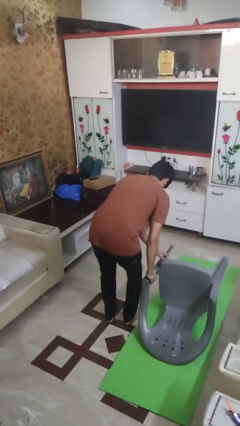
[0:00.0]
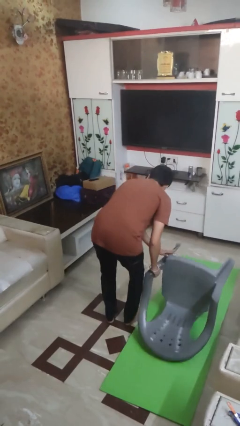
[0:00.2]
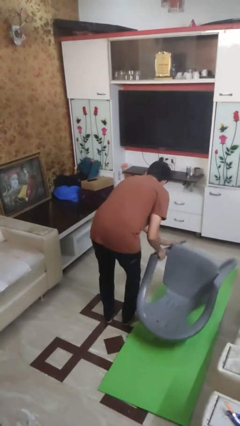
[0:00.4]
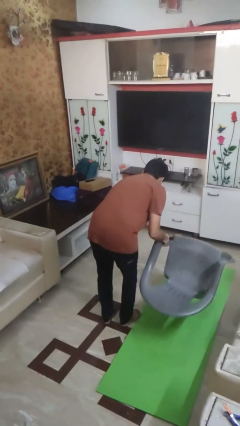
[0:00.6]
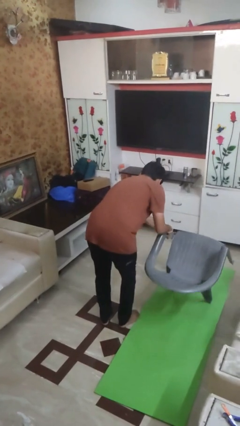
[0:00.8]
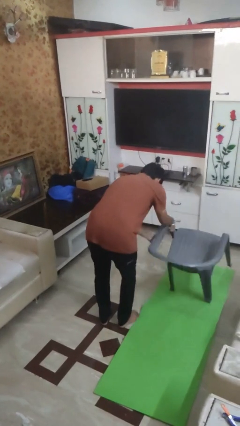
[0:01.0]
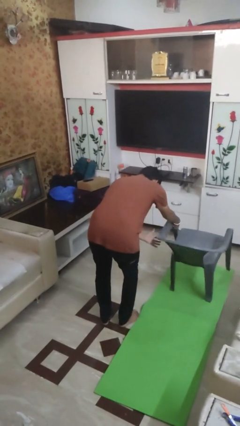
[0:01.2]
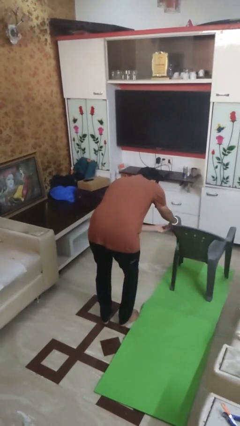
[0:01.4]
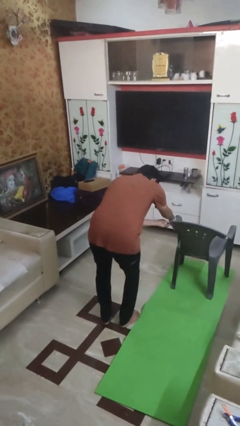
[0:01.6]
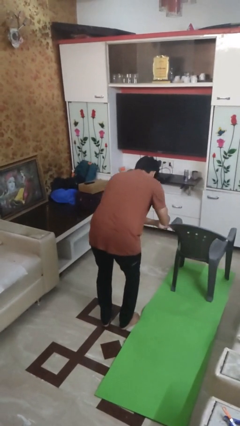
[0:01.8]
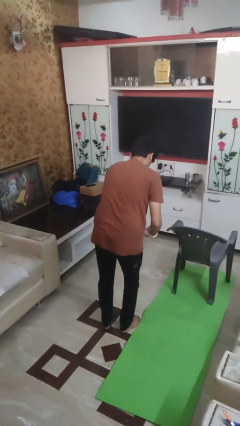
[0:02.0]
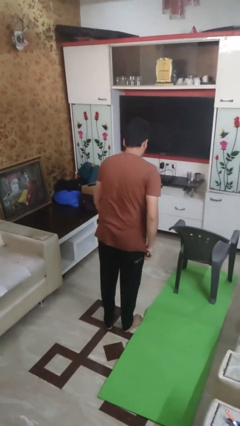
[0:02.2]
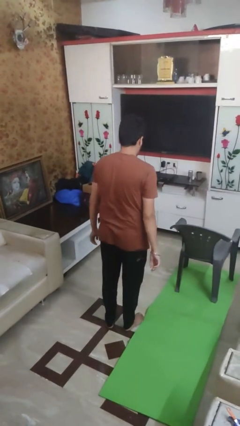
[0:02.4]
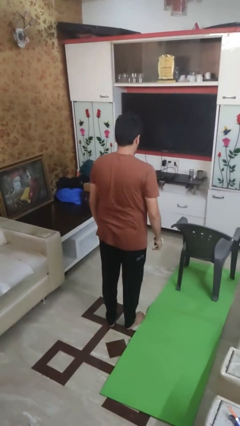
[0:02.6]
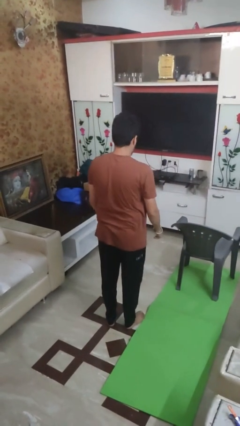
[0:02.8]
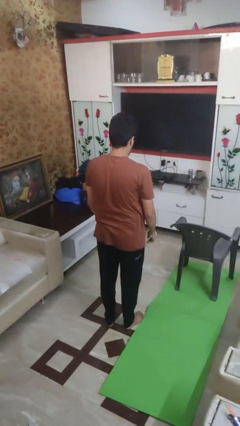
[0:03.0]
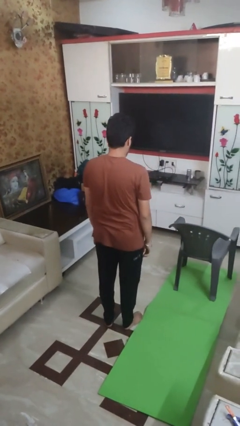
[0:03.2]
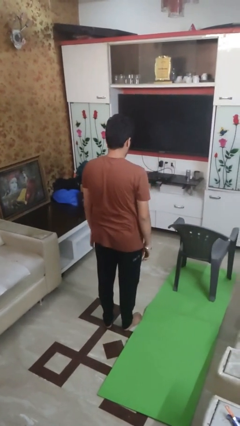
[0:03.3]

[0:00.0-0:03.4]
person sets upright furniture

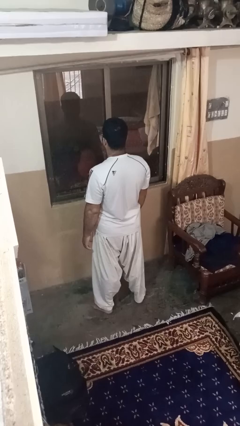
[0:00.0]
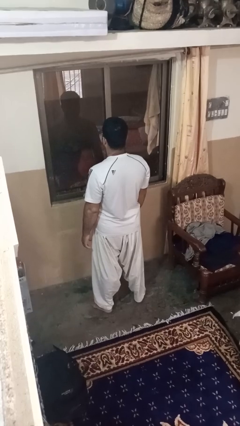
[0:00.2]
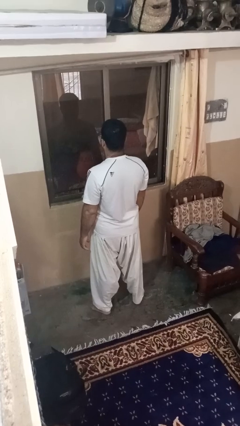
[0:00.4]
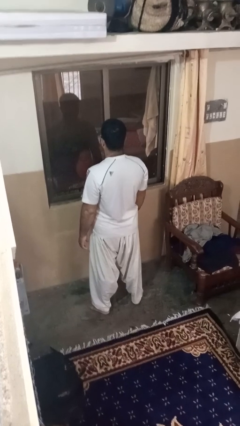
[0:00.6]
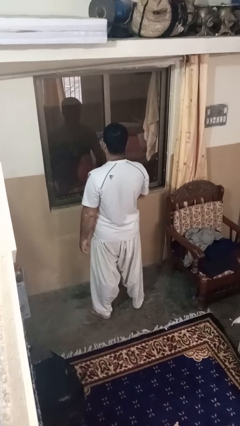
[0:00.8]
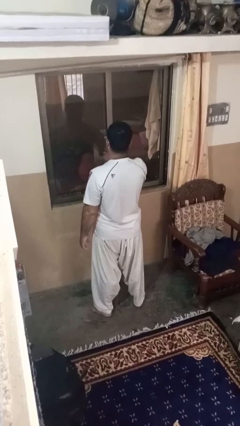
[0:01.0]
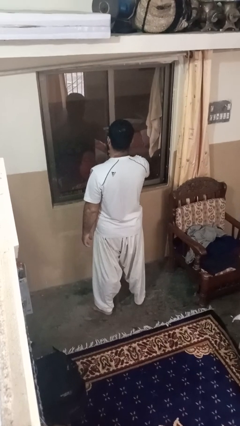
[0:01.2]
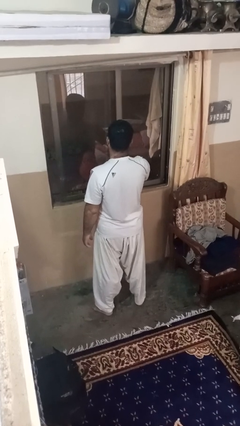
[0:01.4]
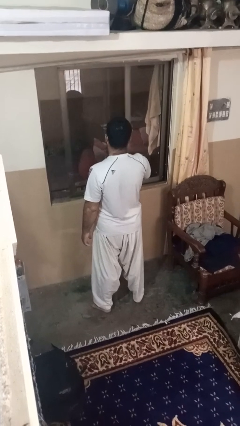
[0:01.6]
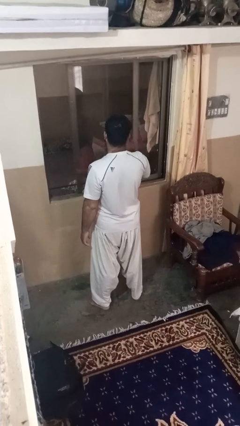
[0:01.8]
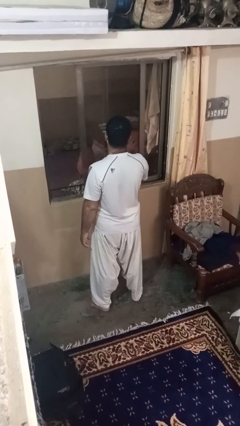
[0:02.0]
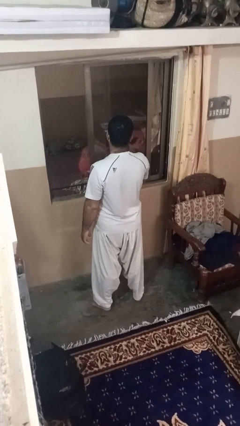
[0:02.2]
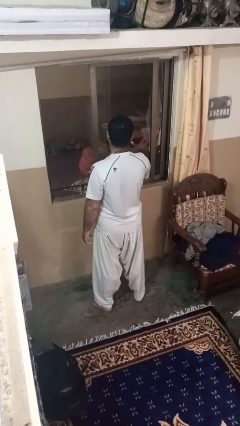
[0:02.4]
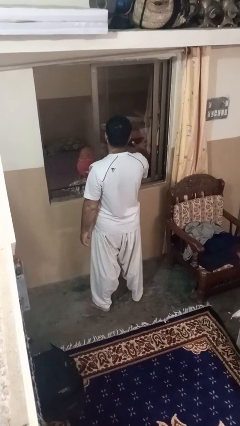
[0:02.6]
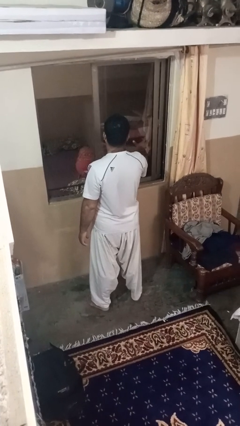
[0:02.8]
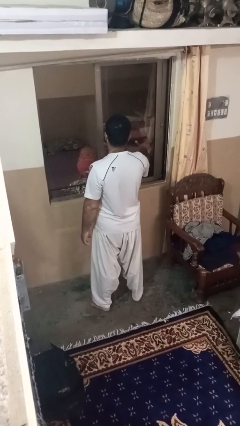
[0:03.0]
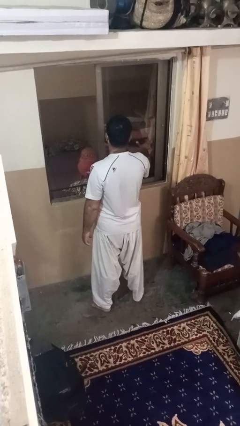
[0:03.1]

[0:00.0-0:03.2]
person opens home window

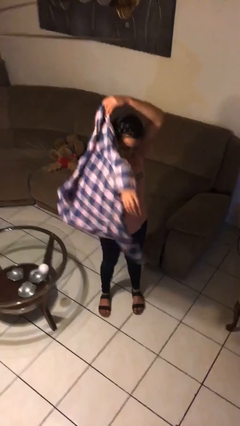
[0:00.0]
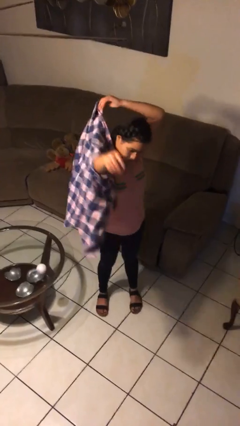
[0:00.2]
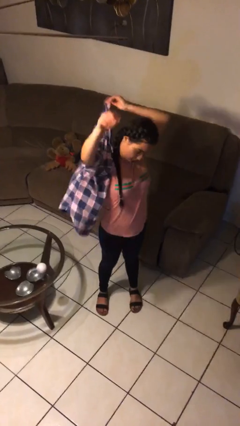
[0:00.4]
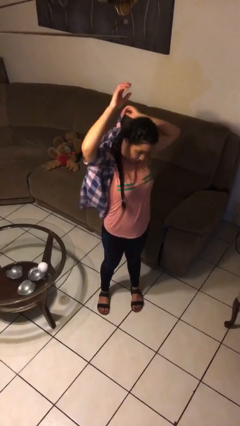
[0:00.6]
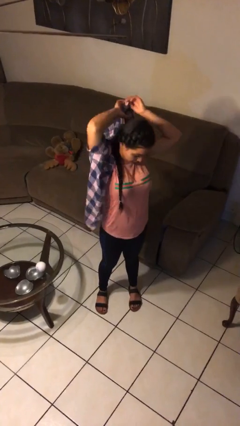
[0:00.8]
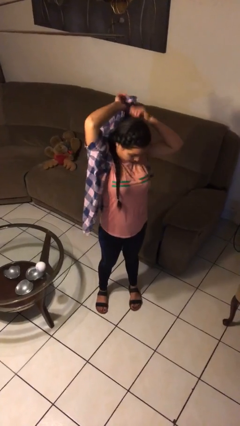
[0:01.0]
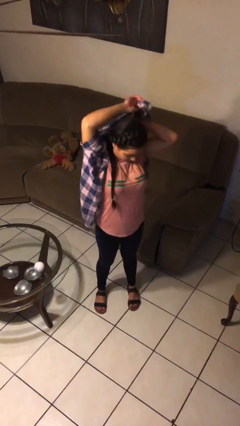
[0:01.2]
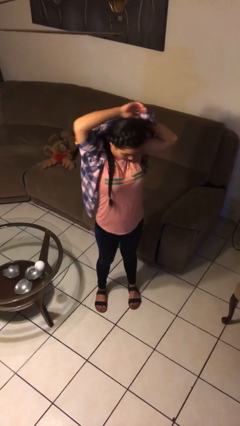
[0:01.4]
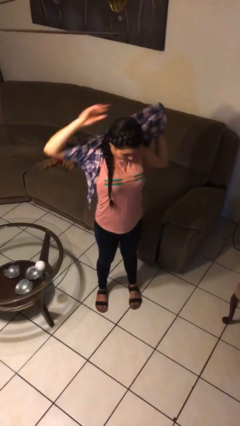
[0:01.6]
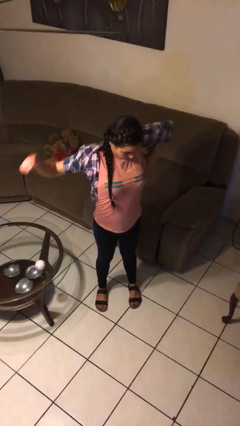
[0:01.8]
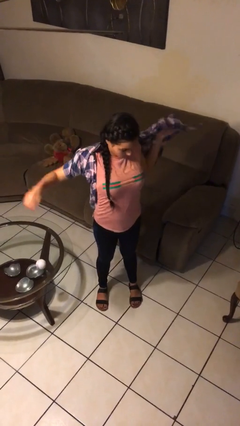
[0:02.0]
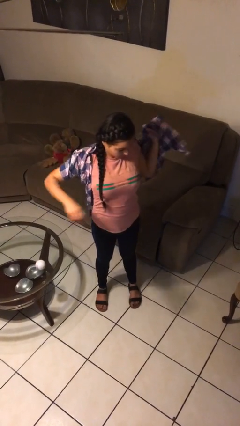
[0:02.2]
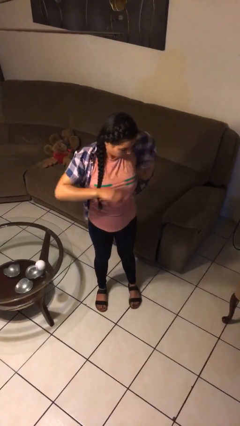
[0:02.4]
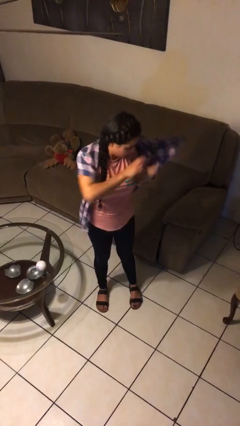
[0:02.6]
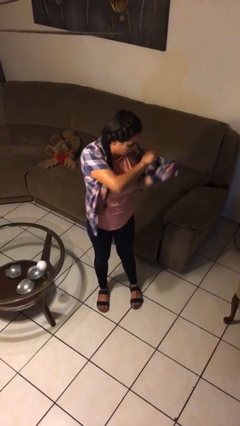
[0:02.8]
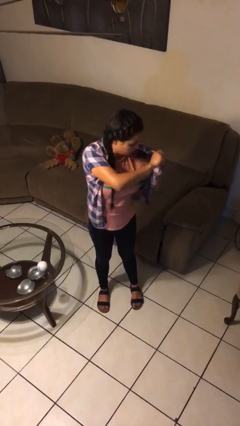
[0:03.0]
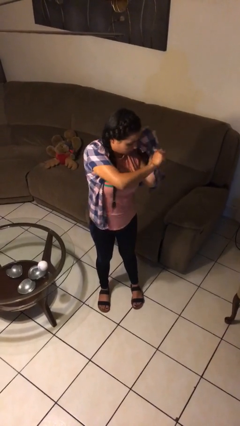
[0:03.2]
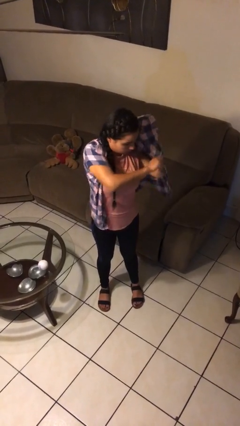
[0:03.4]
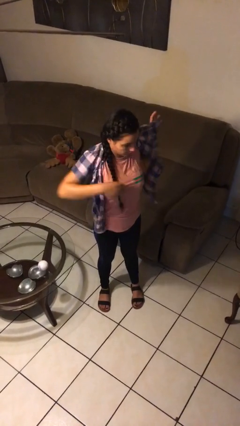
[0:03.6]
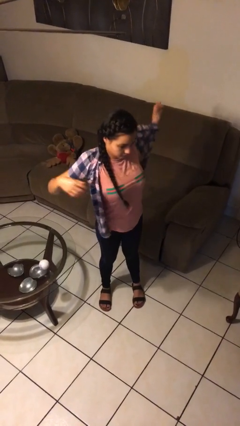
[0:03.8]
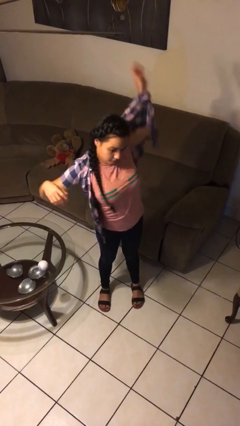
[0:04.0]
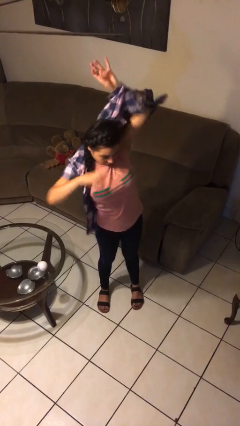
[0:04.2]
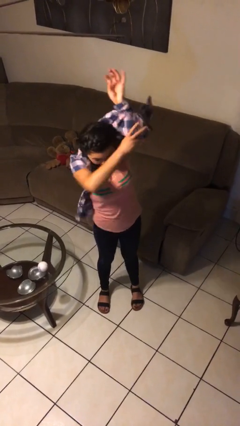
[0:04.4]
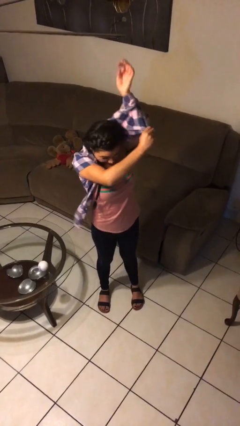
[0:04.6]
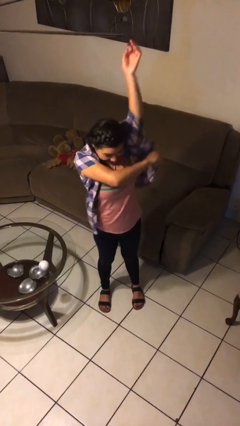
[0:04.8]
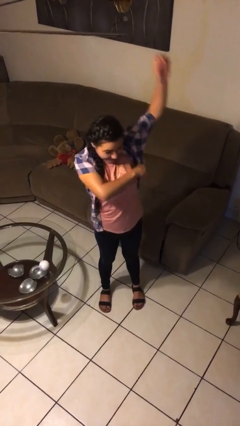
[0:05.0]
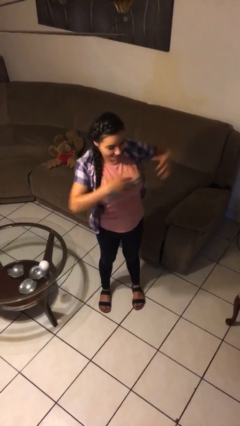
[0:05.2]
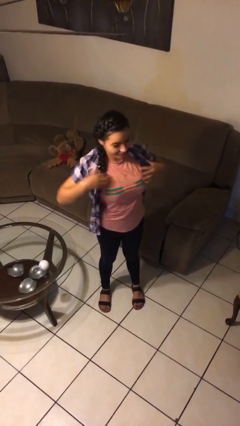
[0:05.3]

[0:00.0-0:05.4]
person puts on shirt

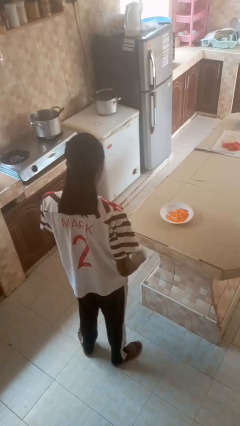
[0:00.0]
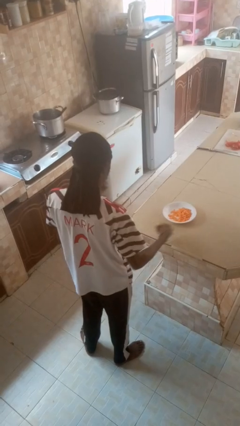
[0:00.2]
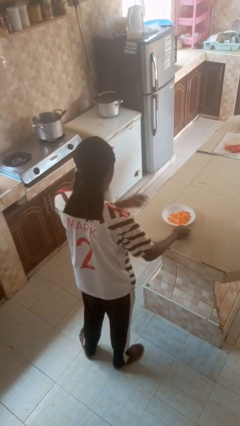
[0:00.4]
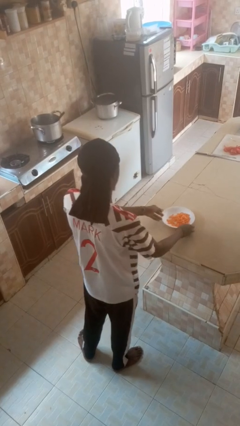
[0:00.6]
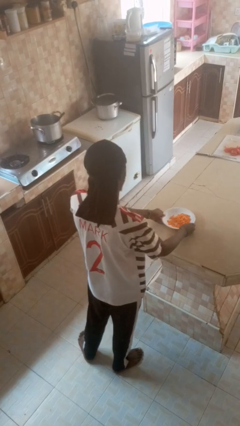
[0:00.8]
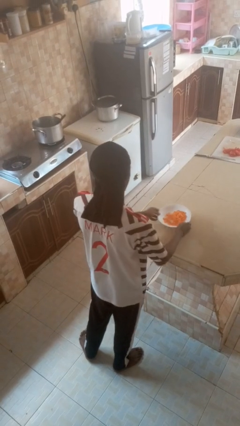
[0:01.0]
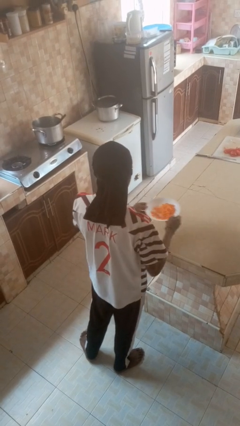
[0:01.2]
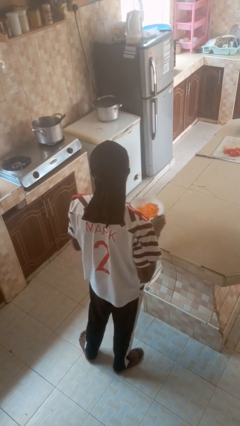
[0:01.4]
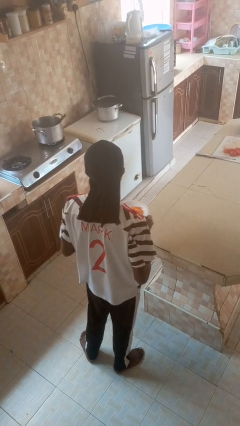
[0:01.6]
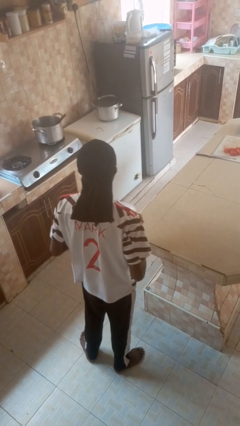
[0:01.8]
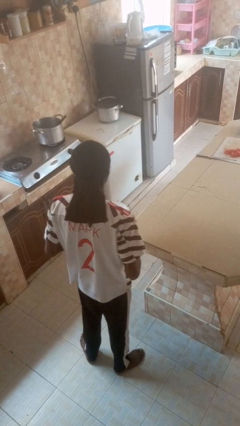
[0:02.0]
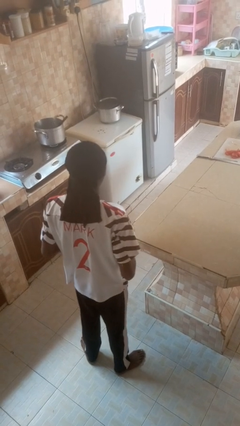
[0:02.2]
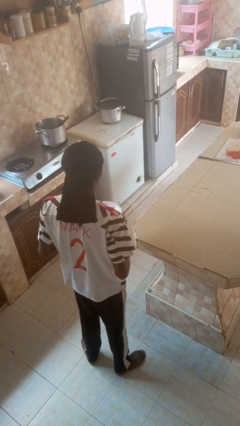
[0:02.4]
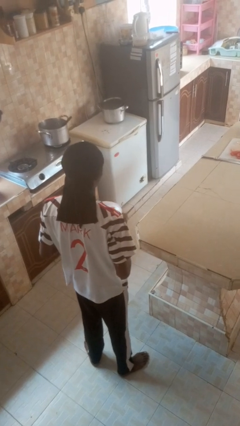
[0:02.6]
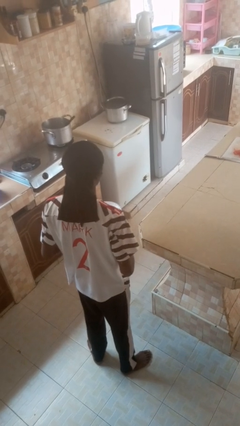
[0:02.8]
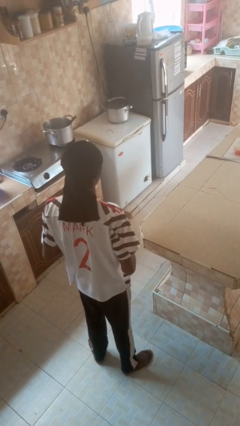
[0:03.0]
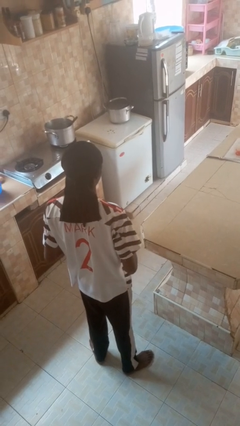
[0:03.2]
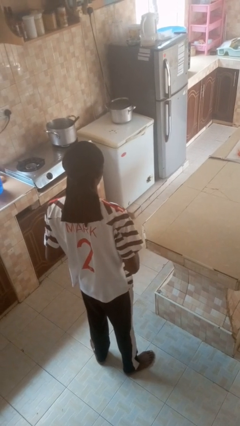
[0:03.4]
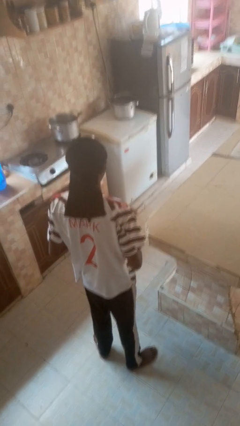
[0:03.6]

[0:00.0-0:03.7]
person picks up object from countertop

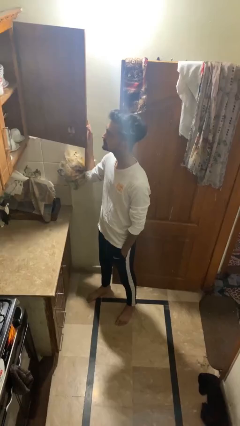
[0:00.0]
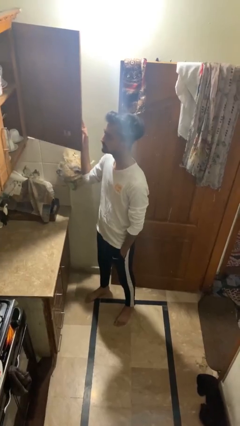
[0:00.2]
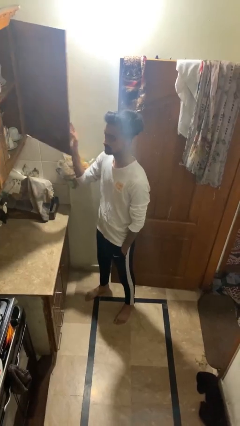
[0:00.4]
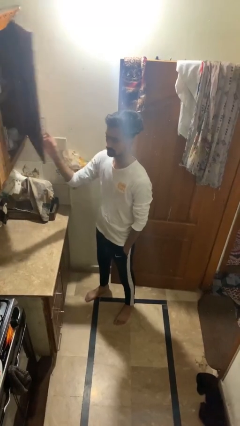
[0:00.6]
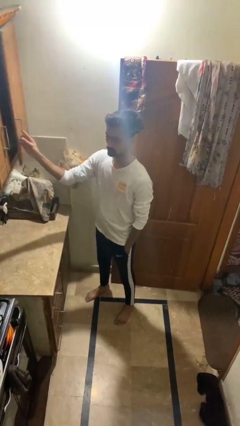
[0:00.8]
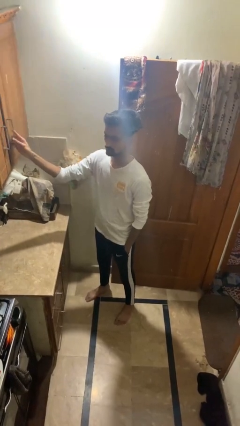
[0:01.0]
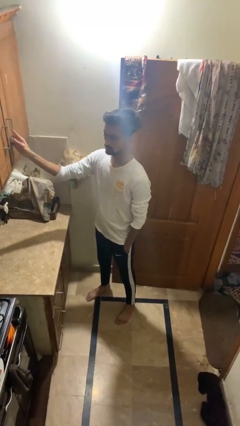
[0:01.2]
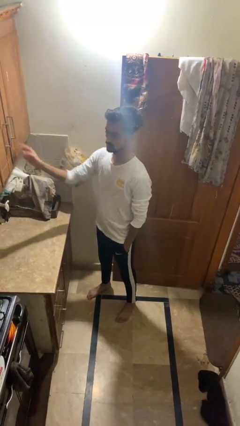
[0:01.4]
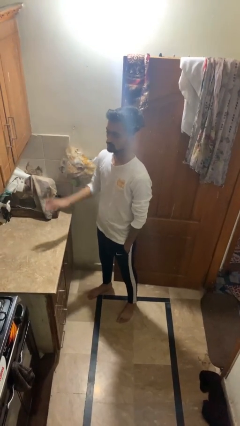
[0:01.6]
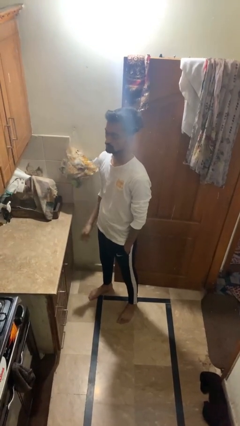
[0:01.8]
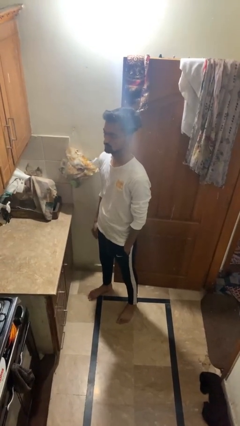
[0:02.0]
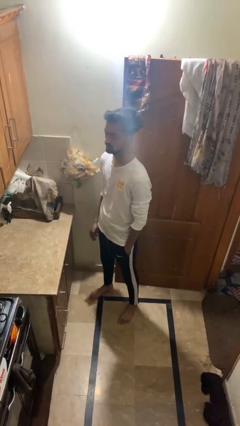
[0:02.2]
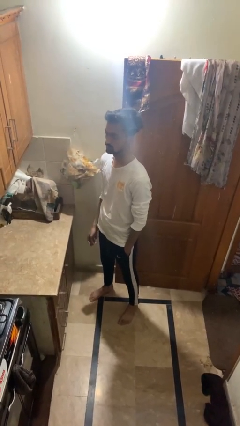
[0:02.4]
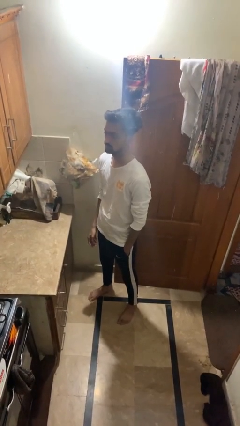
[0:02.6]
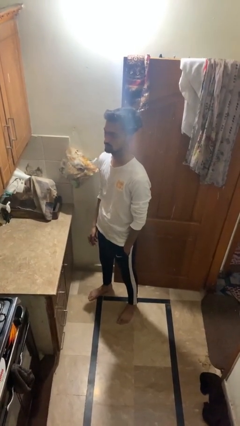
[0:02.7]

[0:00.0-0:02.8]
person closes cabinet
